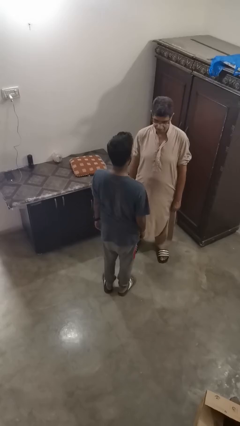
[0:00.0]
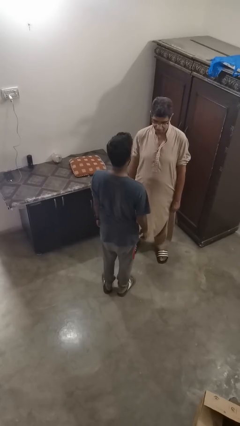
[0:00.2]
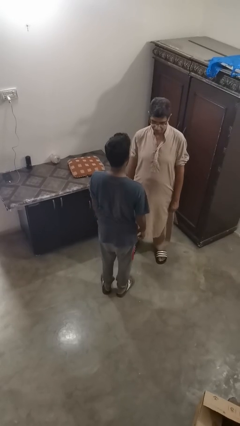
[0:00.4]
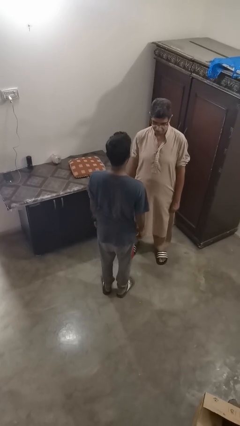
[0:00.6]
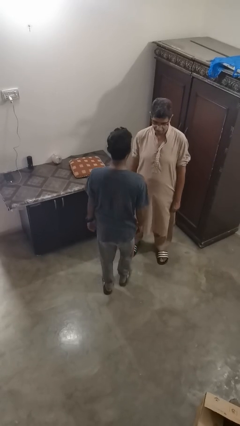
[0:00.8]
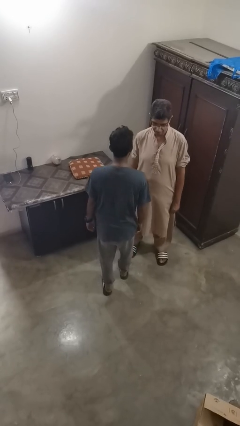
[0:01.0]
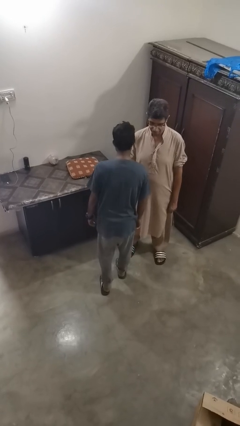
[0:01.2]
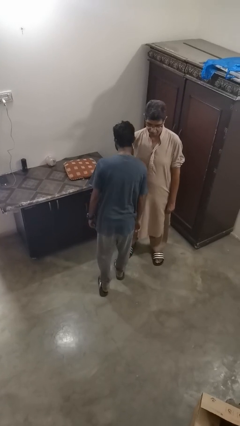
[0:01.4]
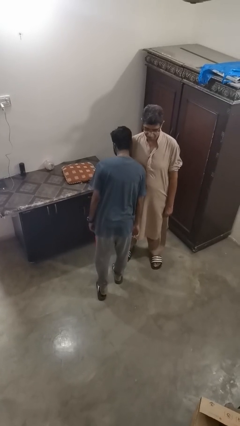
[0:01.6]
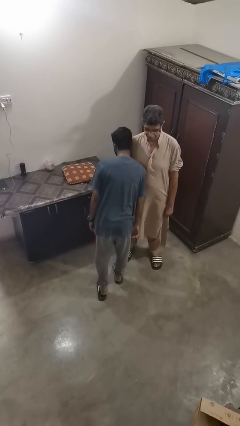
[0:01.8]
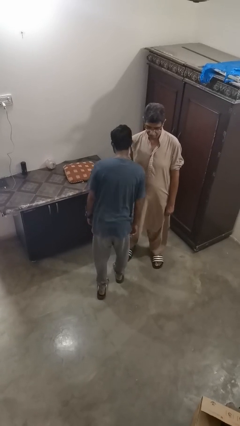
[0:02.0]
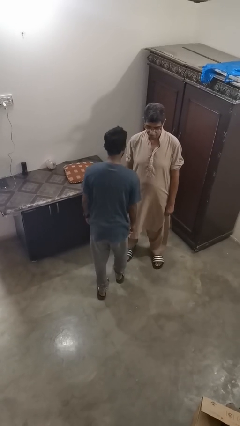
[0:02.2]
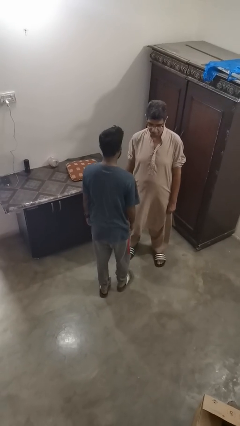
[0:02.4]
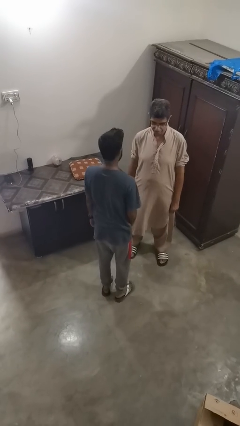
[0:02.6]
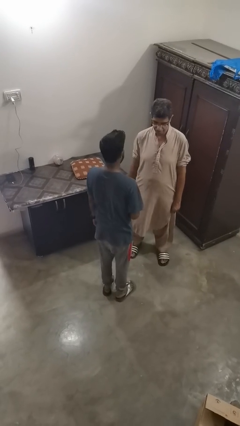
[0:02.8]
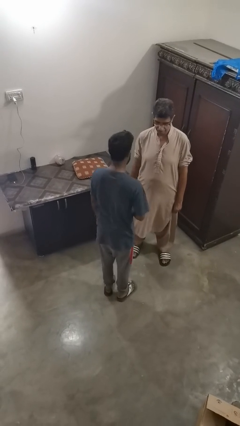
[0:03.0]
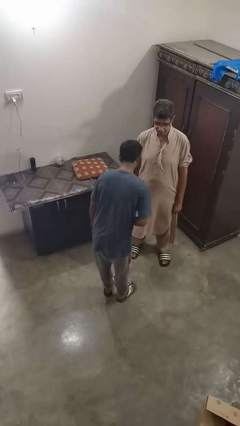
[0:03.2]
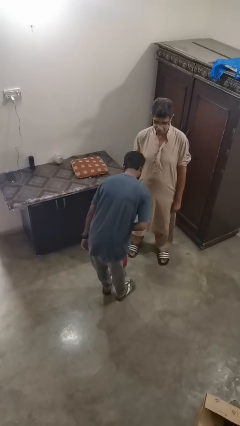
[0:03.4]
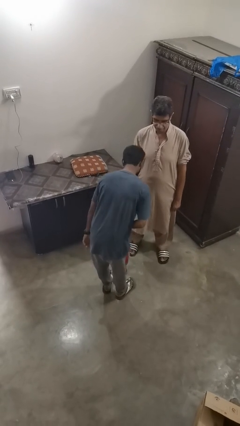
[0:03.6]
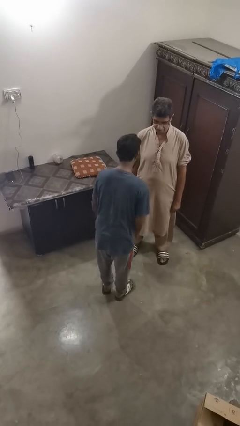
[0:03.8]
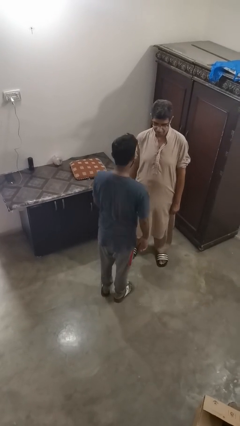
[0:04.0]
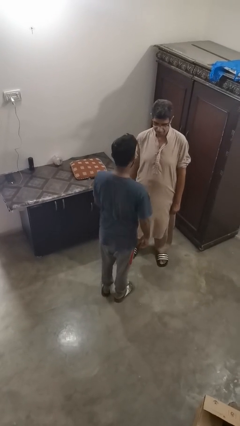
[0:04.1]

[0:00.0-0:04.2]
person bumps into person

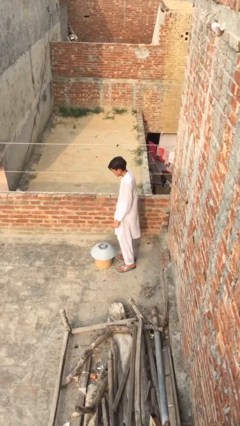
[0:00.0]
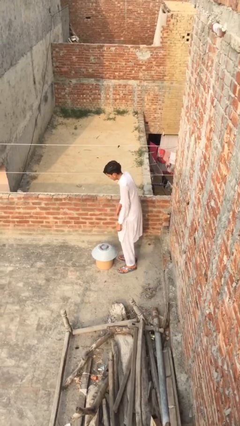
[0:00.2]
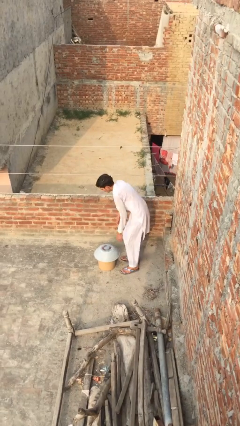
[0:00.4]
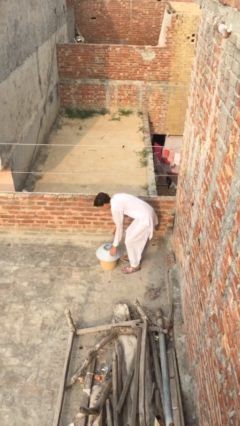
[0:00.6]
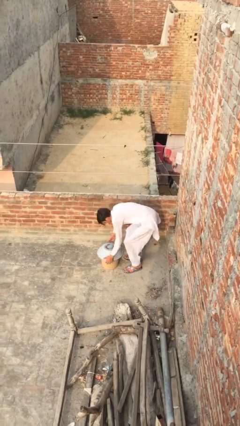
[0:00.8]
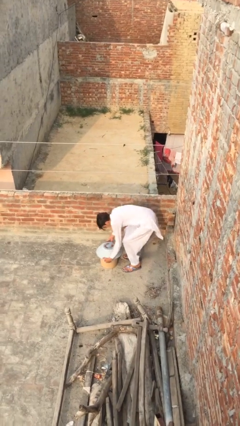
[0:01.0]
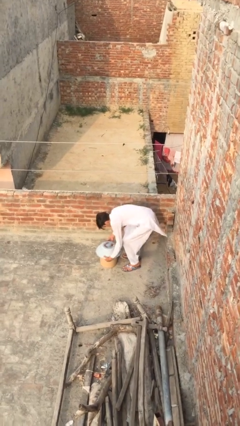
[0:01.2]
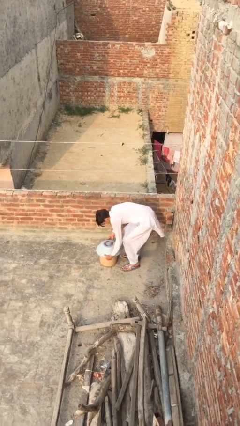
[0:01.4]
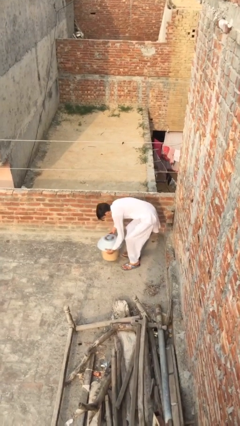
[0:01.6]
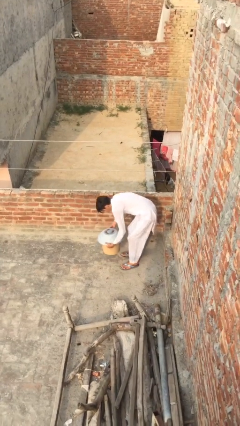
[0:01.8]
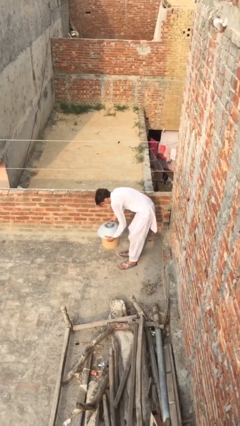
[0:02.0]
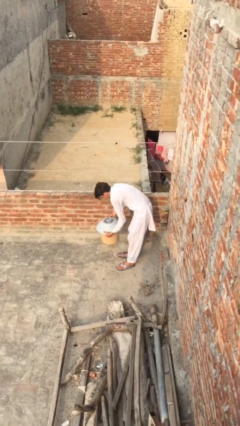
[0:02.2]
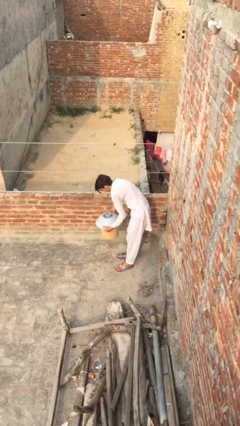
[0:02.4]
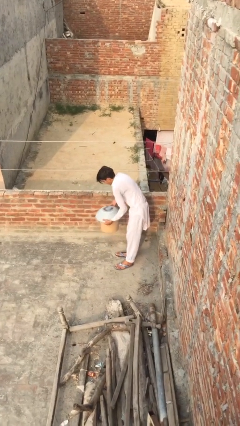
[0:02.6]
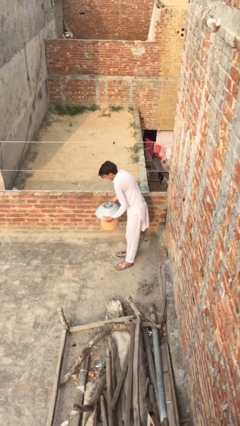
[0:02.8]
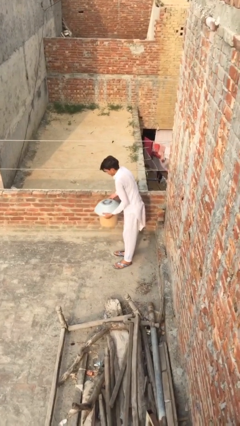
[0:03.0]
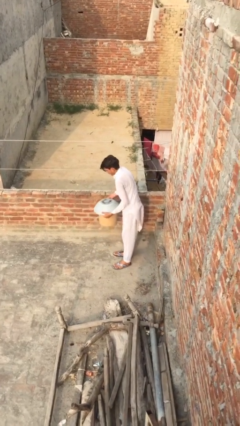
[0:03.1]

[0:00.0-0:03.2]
person picks up object from floor

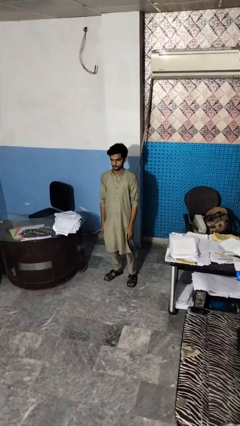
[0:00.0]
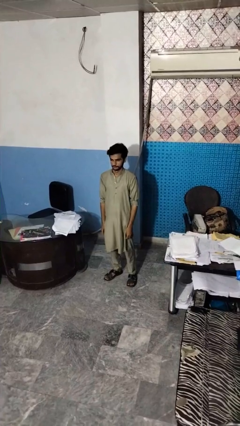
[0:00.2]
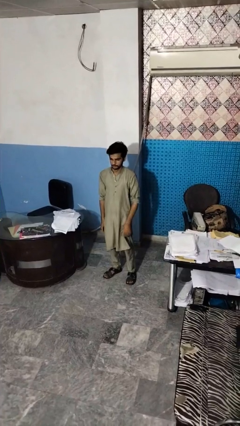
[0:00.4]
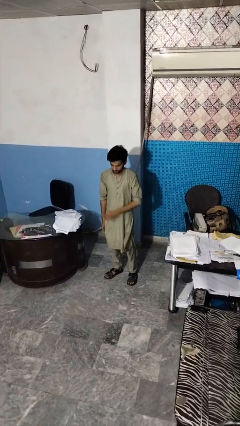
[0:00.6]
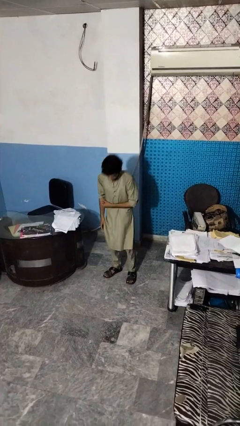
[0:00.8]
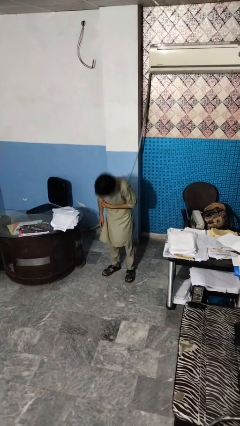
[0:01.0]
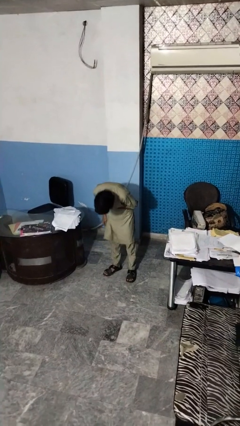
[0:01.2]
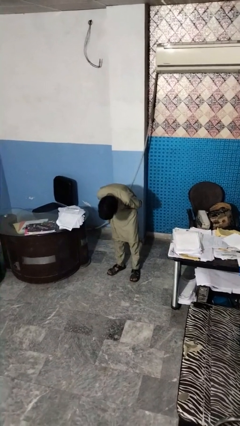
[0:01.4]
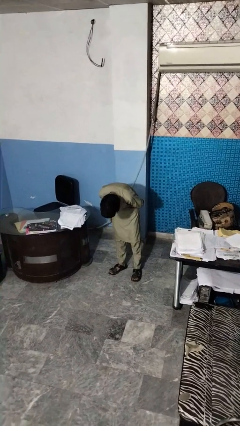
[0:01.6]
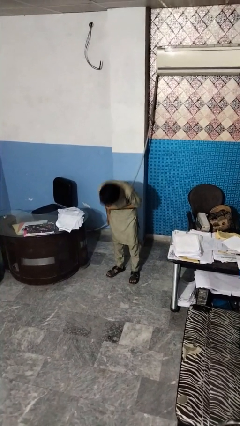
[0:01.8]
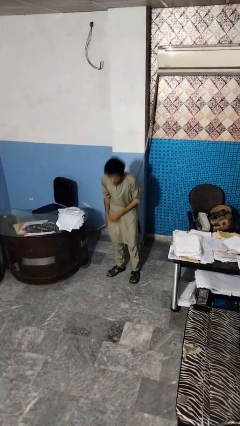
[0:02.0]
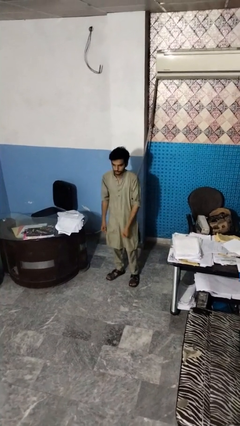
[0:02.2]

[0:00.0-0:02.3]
person bows

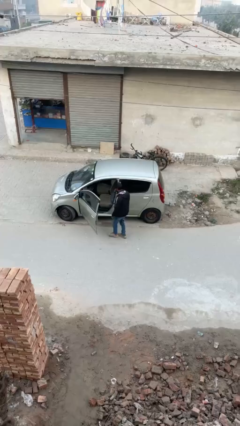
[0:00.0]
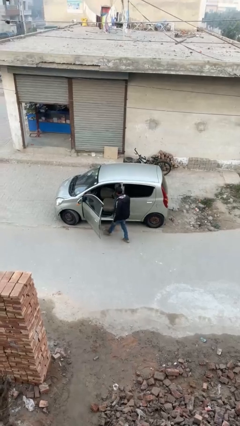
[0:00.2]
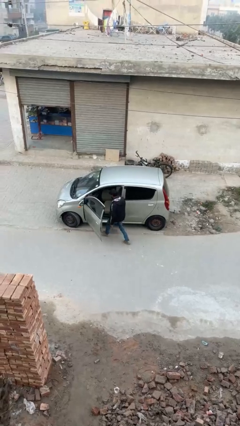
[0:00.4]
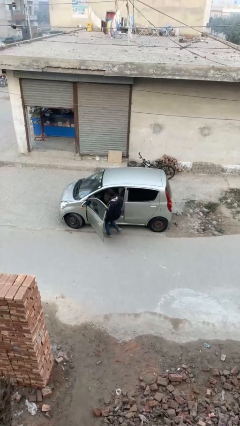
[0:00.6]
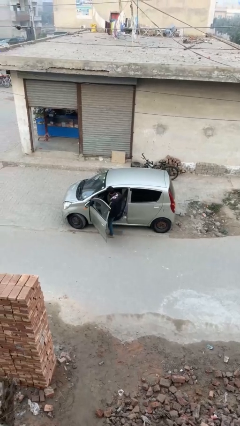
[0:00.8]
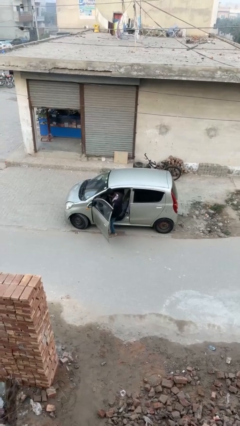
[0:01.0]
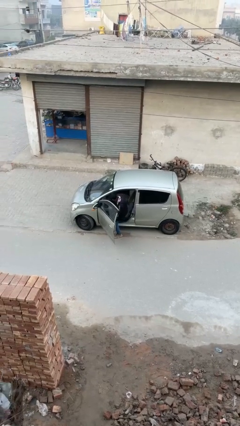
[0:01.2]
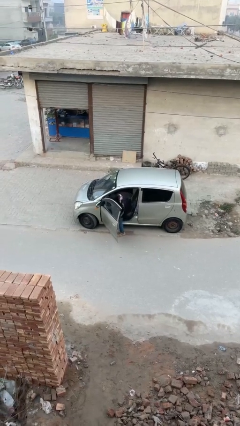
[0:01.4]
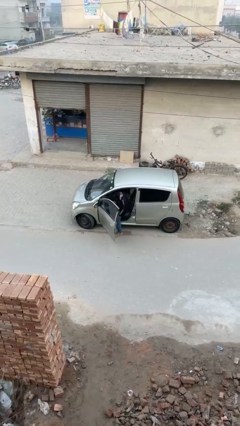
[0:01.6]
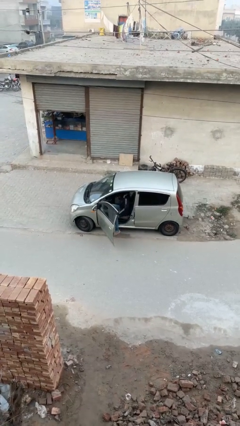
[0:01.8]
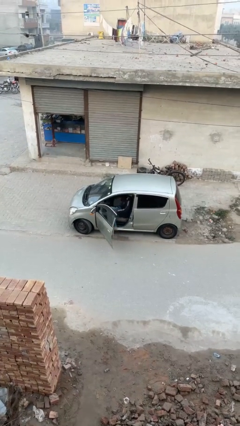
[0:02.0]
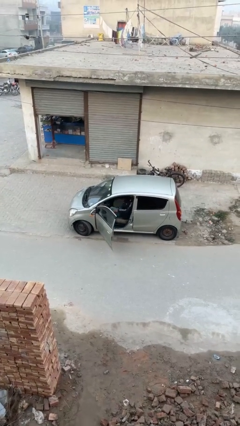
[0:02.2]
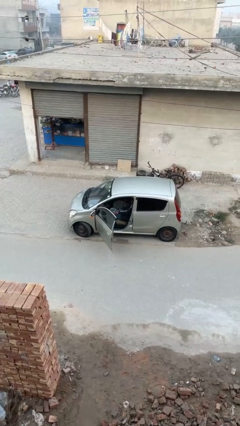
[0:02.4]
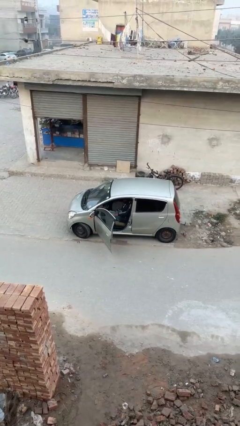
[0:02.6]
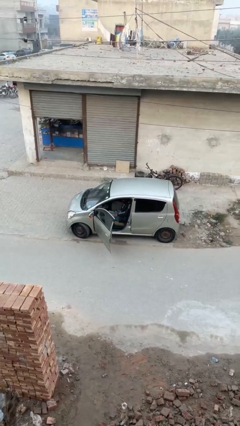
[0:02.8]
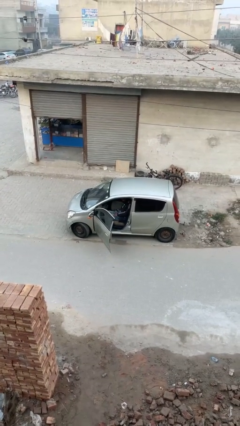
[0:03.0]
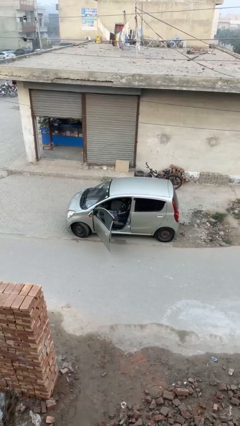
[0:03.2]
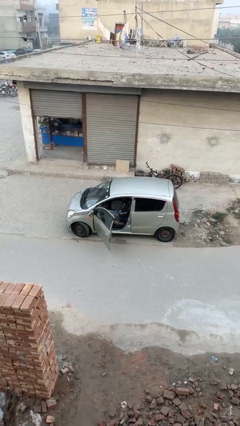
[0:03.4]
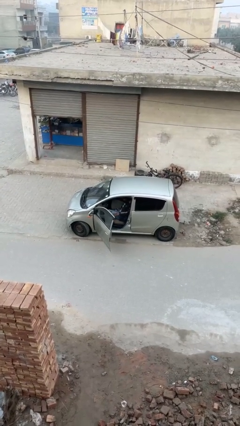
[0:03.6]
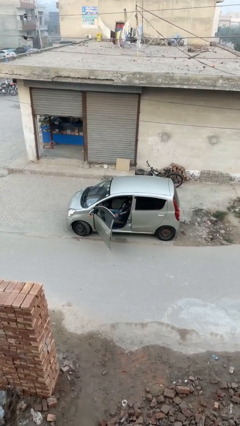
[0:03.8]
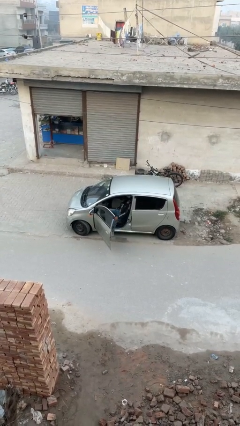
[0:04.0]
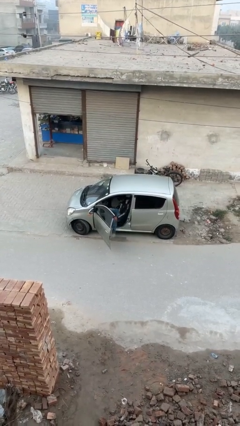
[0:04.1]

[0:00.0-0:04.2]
person enters car

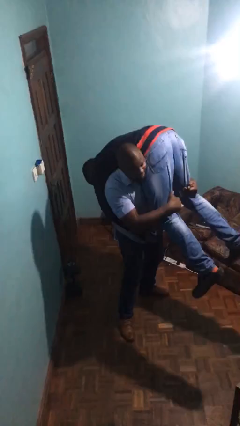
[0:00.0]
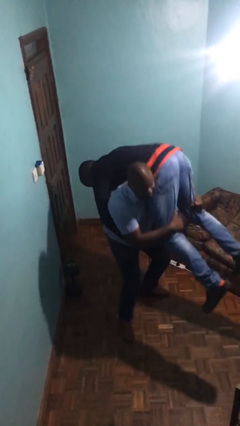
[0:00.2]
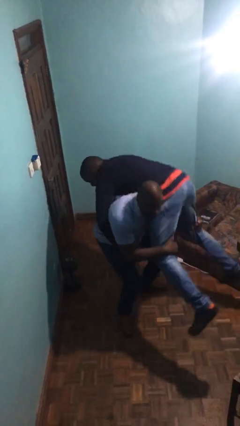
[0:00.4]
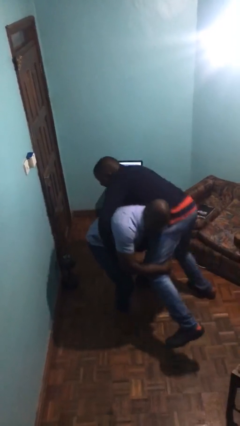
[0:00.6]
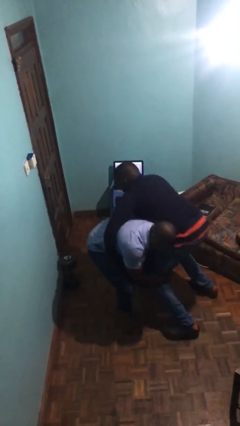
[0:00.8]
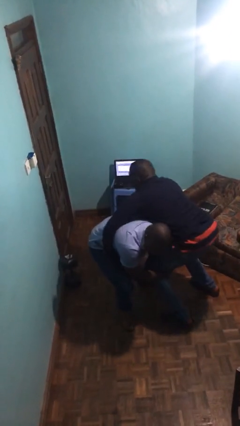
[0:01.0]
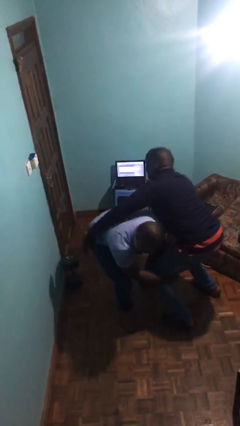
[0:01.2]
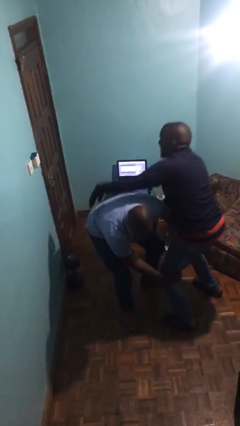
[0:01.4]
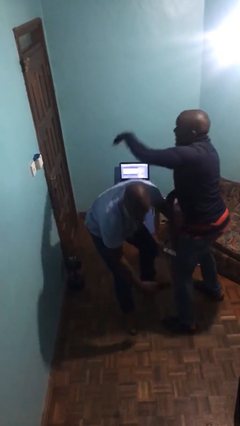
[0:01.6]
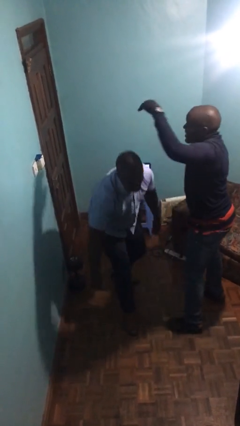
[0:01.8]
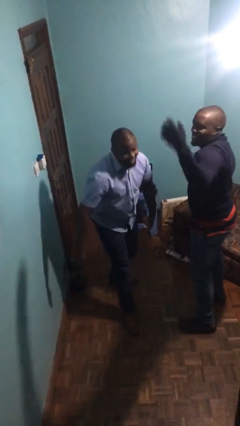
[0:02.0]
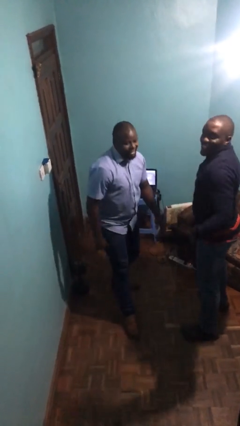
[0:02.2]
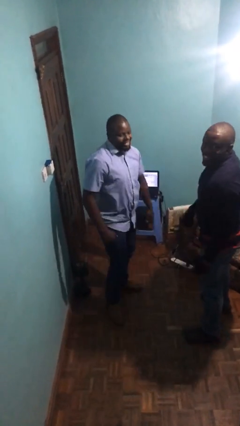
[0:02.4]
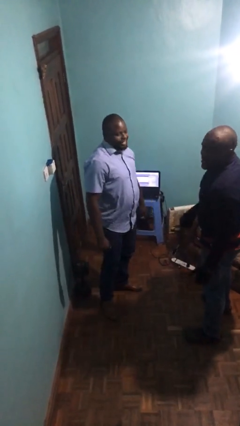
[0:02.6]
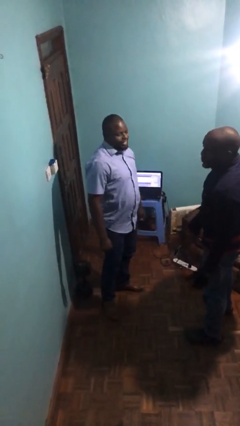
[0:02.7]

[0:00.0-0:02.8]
person puts down person

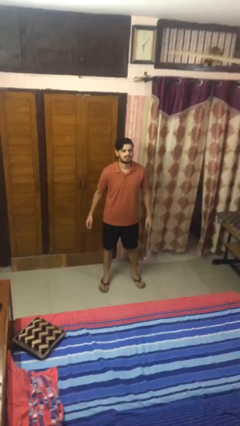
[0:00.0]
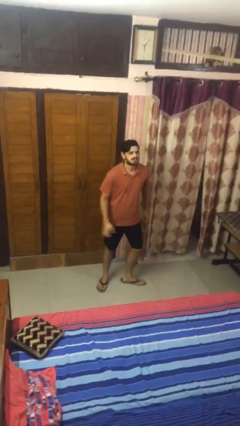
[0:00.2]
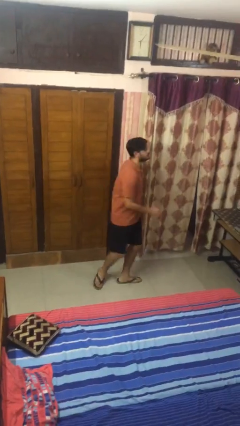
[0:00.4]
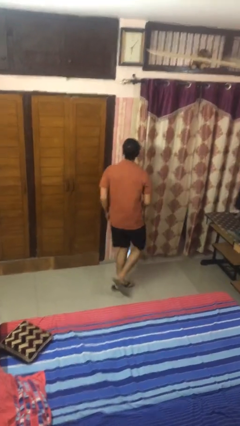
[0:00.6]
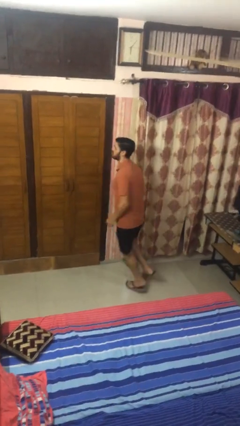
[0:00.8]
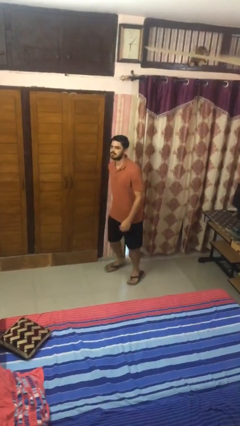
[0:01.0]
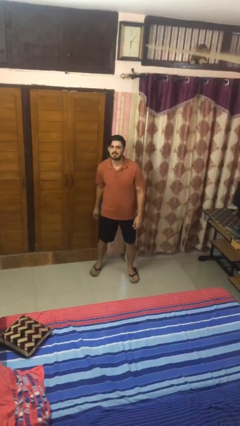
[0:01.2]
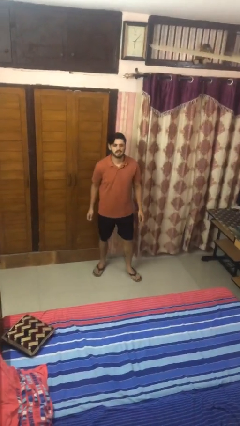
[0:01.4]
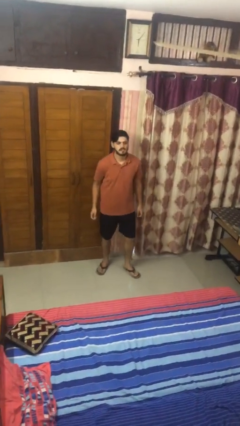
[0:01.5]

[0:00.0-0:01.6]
person twirls
